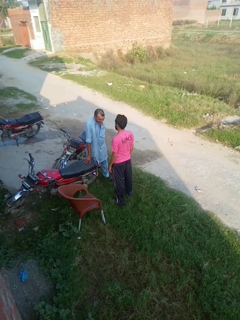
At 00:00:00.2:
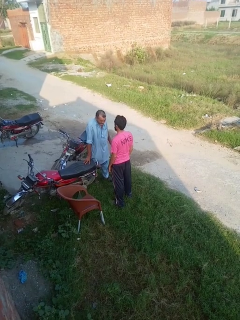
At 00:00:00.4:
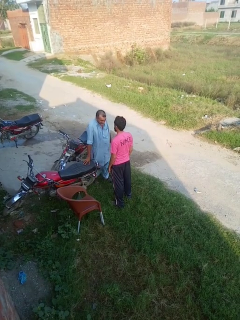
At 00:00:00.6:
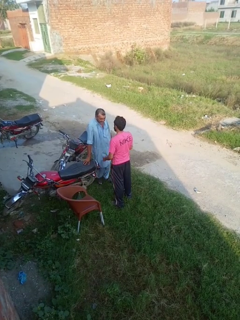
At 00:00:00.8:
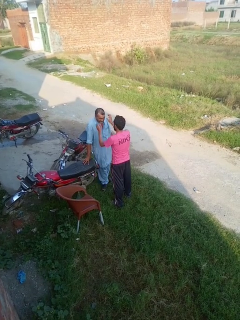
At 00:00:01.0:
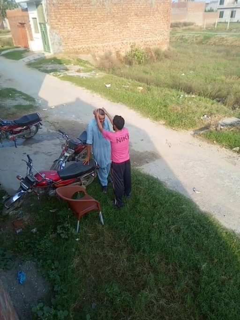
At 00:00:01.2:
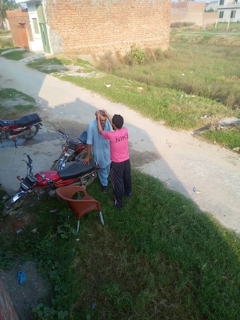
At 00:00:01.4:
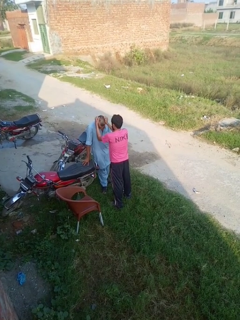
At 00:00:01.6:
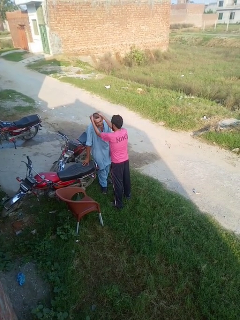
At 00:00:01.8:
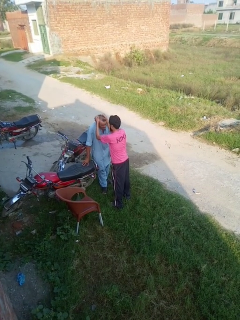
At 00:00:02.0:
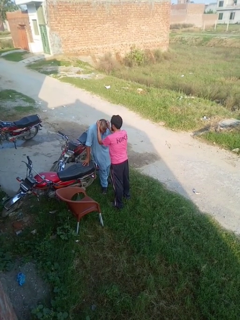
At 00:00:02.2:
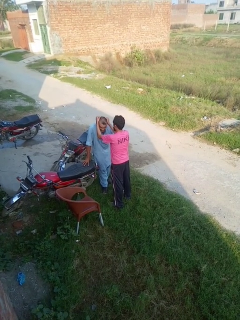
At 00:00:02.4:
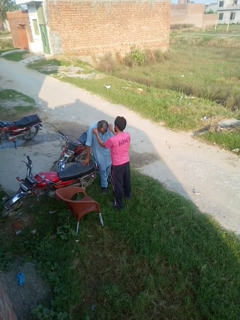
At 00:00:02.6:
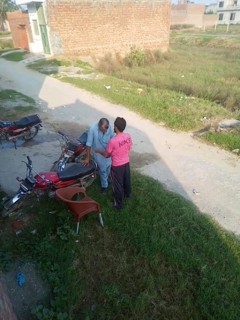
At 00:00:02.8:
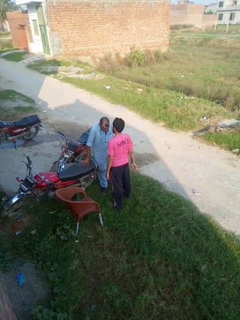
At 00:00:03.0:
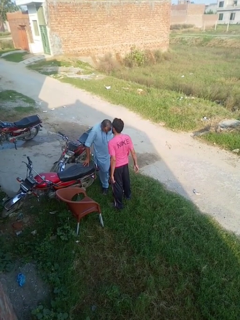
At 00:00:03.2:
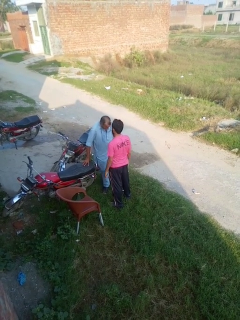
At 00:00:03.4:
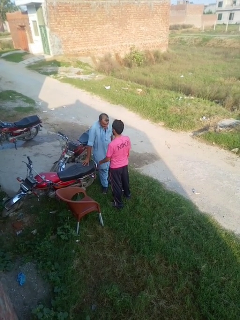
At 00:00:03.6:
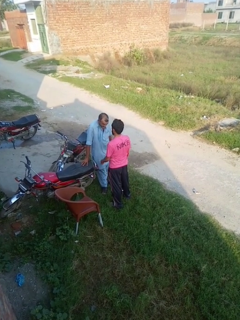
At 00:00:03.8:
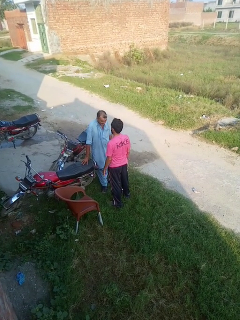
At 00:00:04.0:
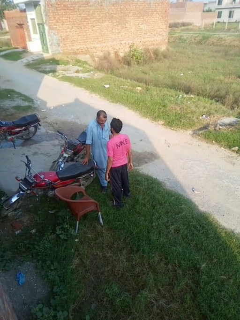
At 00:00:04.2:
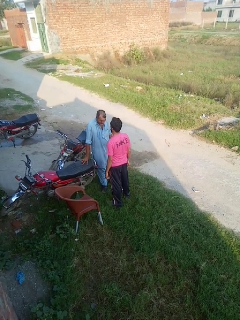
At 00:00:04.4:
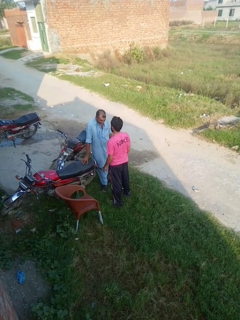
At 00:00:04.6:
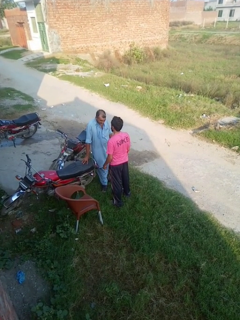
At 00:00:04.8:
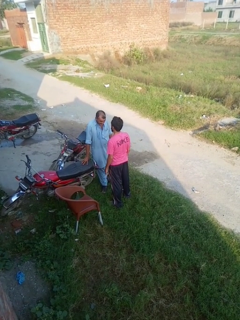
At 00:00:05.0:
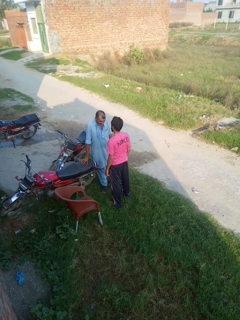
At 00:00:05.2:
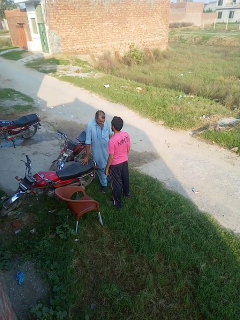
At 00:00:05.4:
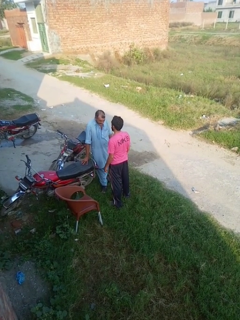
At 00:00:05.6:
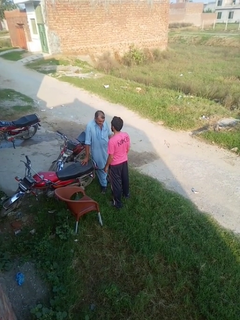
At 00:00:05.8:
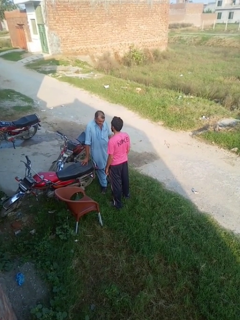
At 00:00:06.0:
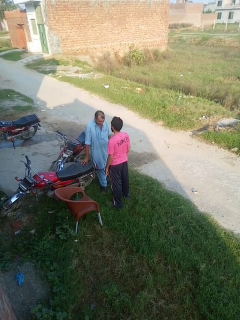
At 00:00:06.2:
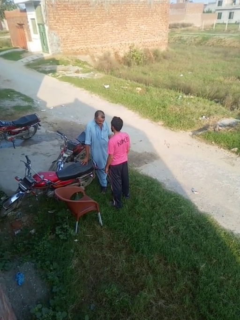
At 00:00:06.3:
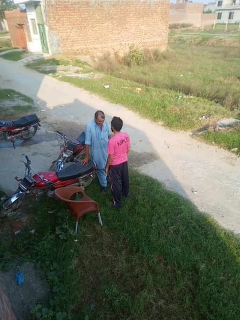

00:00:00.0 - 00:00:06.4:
person grabs person by hair

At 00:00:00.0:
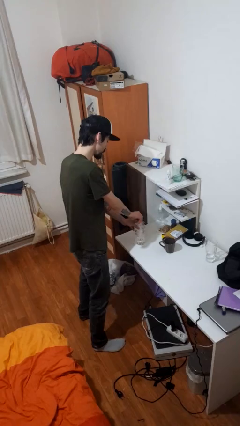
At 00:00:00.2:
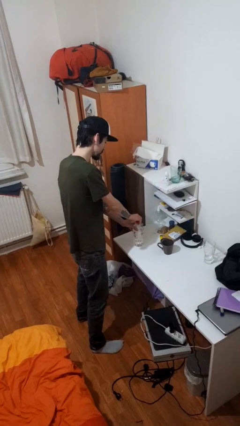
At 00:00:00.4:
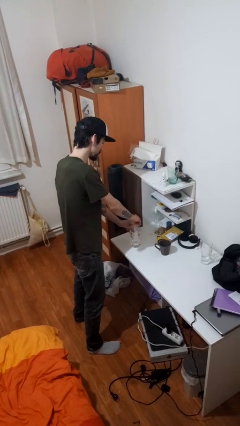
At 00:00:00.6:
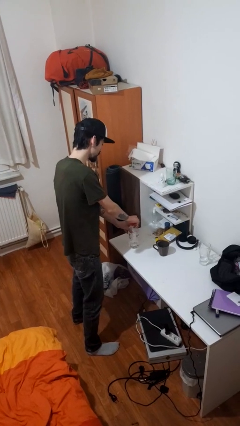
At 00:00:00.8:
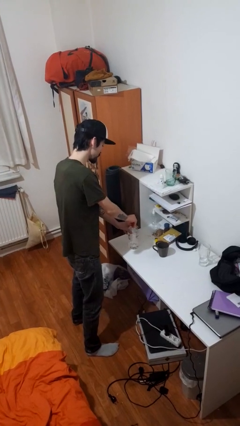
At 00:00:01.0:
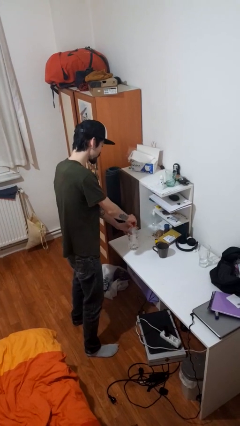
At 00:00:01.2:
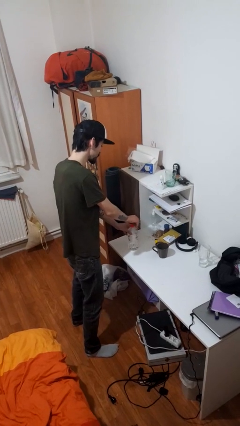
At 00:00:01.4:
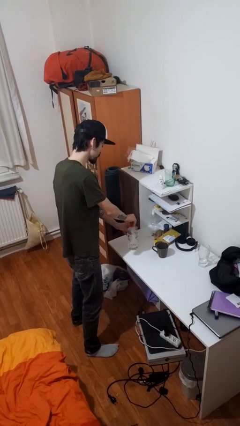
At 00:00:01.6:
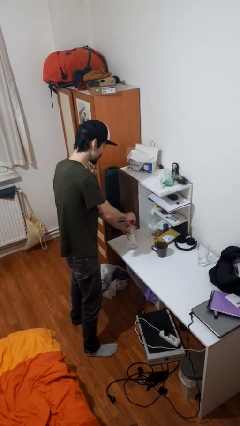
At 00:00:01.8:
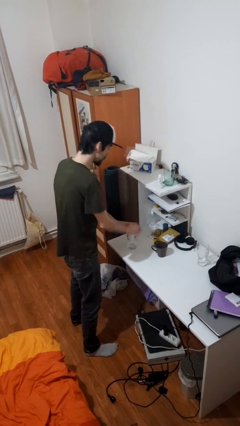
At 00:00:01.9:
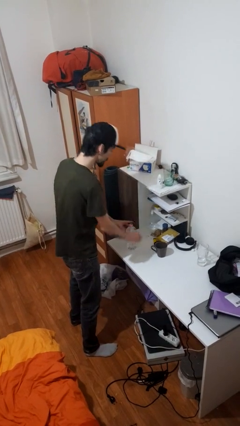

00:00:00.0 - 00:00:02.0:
person unscrews lid from bottle

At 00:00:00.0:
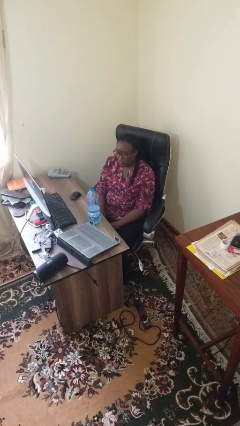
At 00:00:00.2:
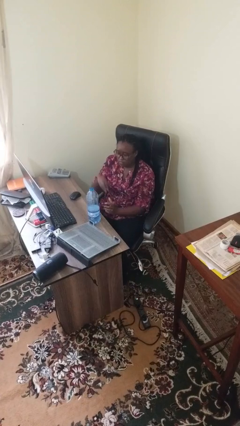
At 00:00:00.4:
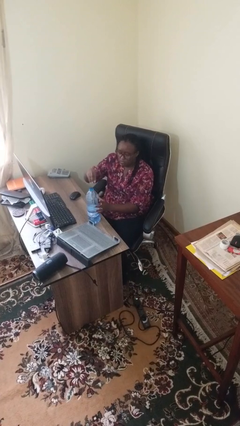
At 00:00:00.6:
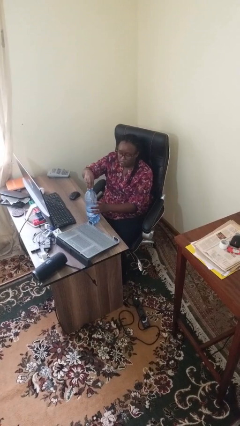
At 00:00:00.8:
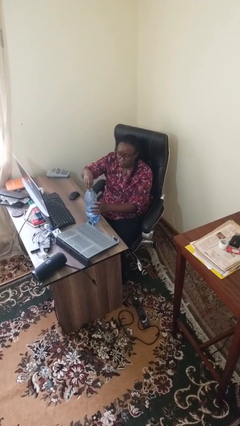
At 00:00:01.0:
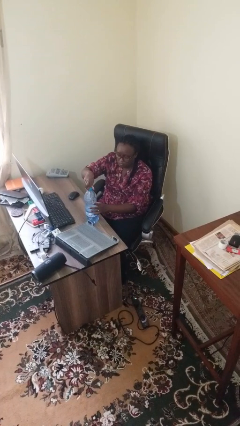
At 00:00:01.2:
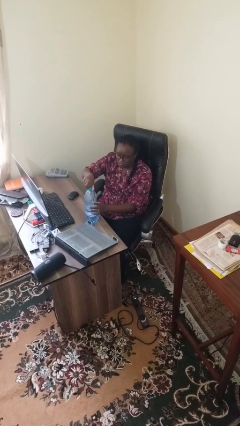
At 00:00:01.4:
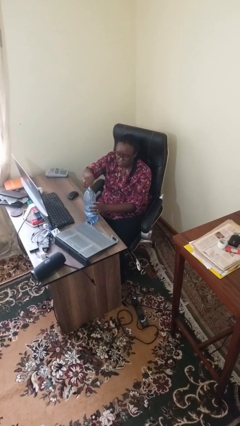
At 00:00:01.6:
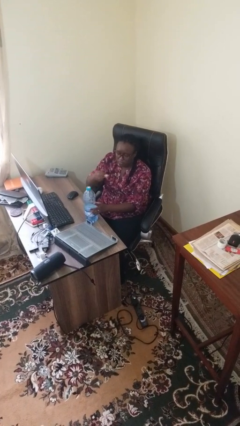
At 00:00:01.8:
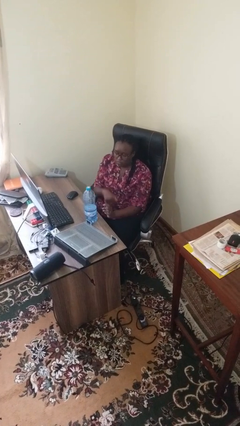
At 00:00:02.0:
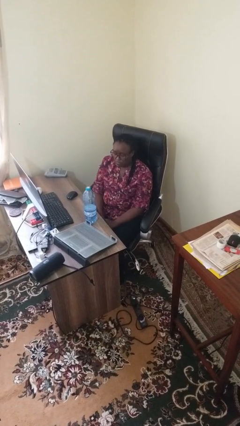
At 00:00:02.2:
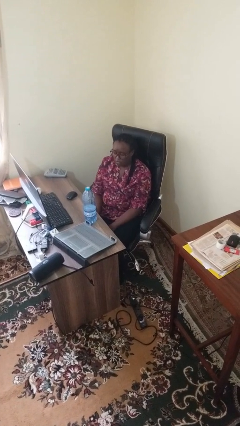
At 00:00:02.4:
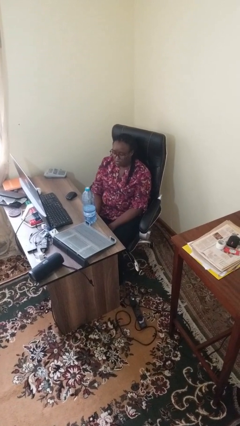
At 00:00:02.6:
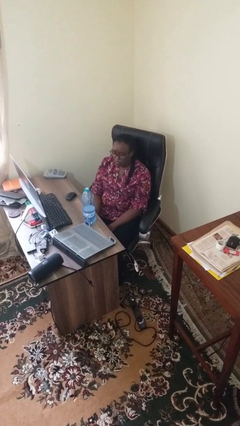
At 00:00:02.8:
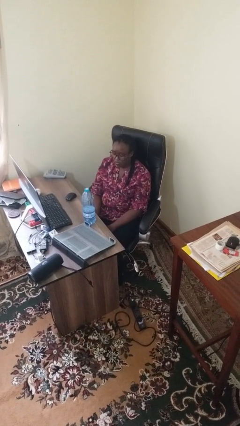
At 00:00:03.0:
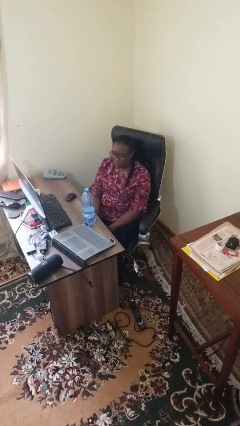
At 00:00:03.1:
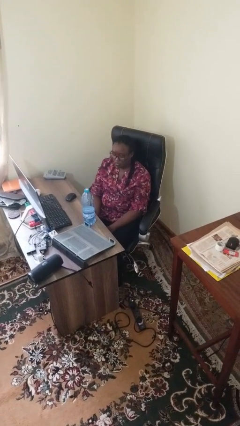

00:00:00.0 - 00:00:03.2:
person screws lid to bottle

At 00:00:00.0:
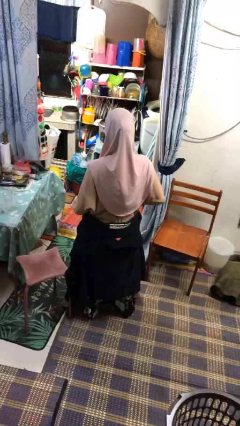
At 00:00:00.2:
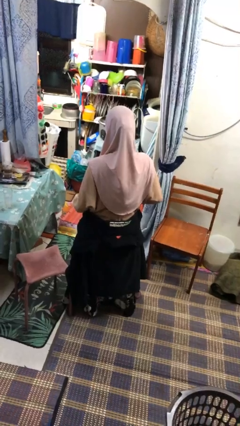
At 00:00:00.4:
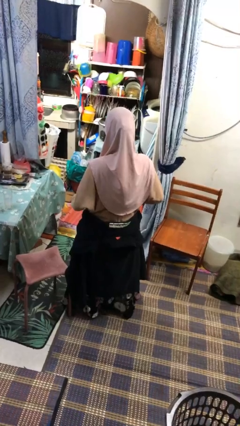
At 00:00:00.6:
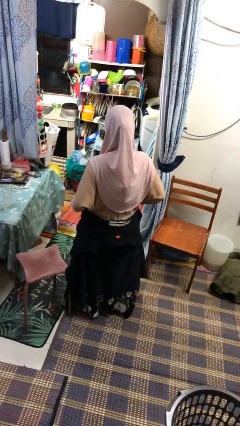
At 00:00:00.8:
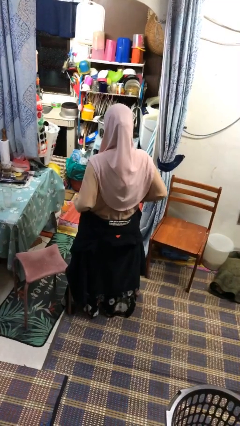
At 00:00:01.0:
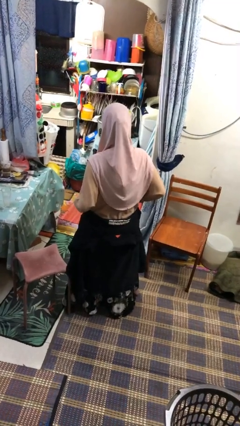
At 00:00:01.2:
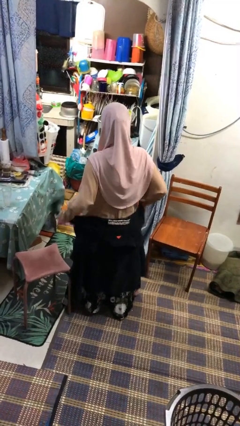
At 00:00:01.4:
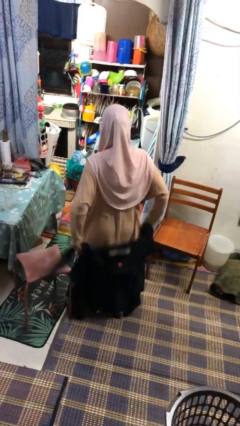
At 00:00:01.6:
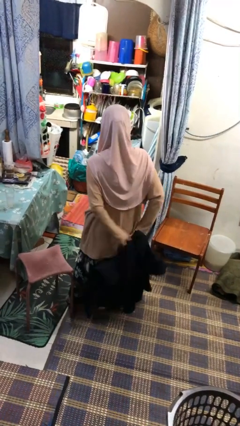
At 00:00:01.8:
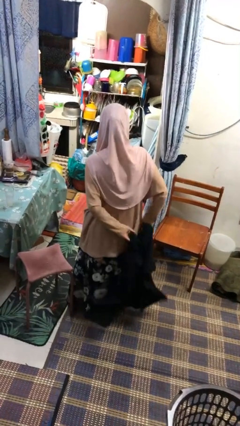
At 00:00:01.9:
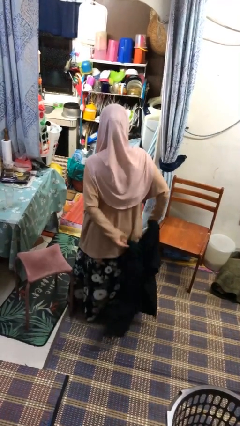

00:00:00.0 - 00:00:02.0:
person unties jacket around waist

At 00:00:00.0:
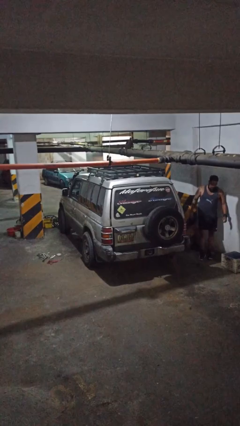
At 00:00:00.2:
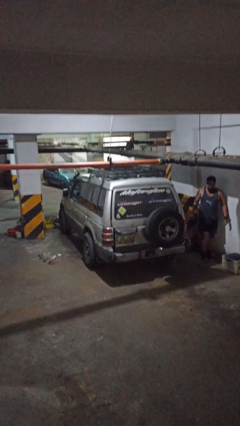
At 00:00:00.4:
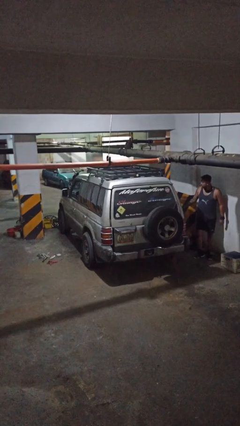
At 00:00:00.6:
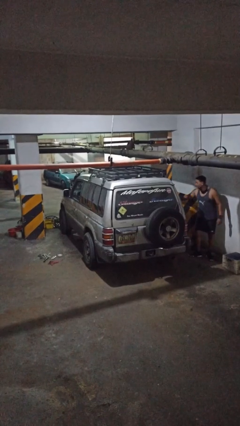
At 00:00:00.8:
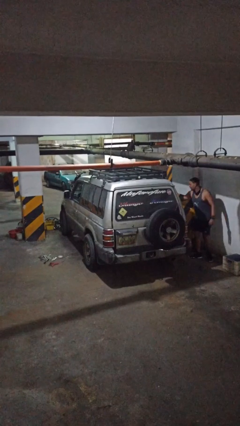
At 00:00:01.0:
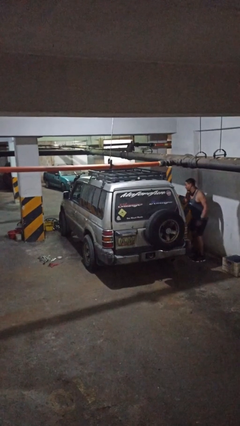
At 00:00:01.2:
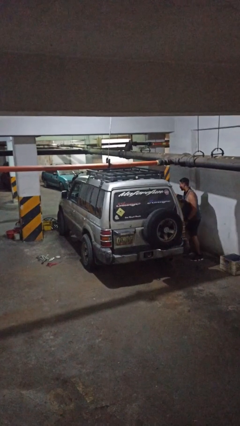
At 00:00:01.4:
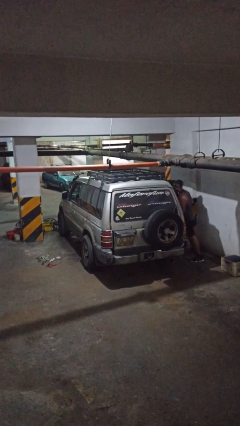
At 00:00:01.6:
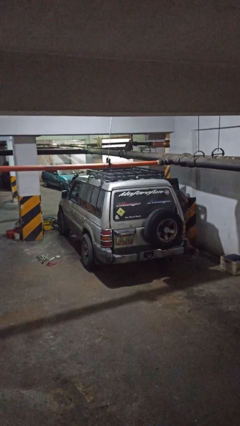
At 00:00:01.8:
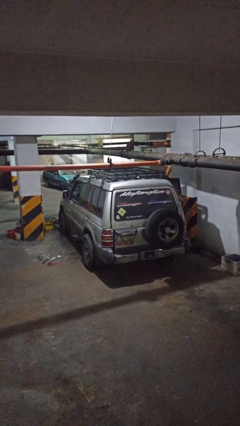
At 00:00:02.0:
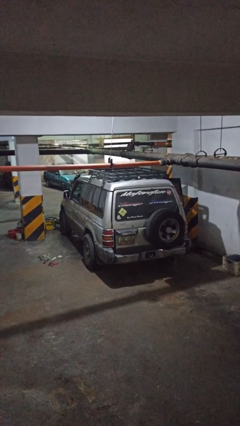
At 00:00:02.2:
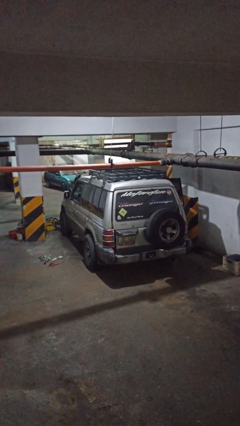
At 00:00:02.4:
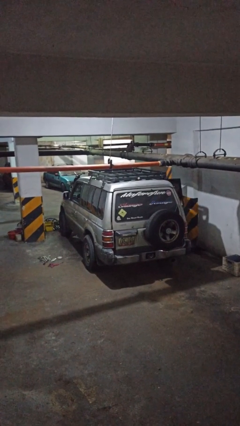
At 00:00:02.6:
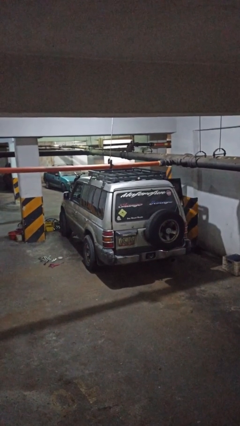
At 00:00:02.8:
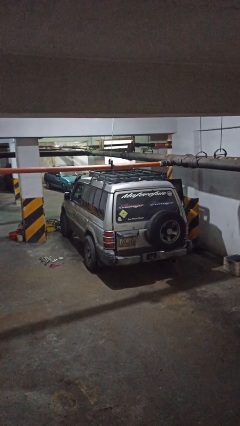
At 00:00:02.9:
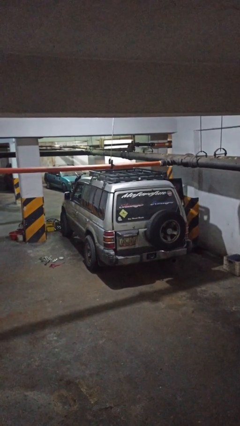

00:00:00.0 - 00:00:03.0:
car picks up person

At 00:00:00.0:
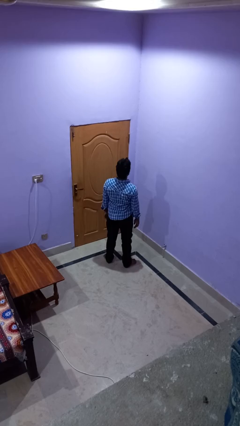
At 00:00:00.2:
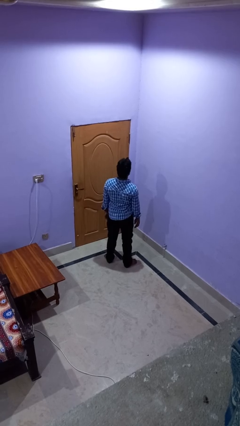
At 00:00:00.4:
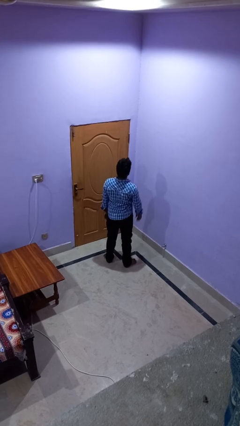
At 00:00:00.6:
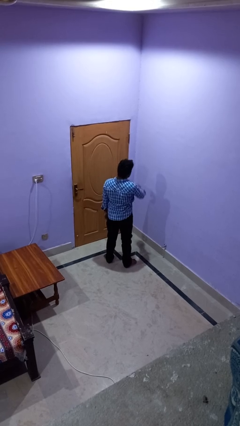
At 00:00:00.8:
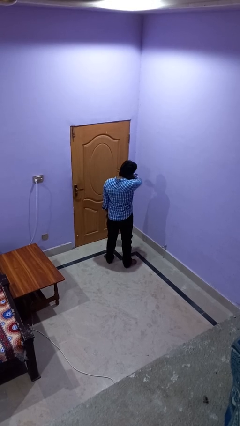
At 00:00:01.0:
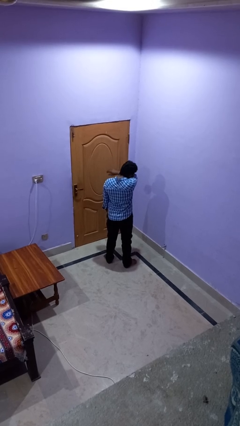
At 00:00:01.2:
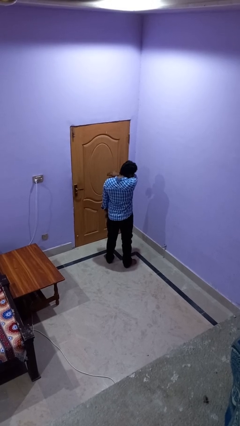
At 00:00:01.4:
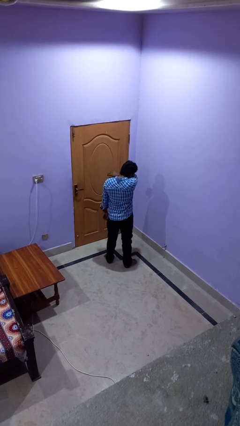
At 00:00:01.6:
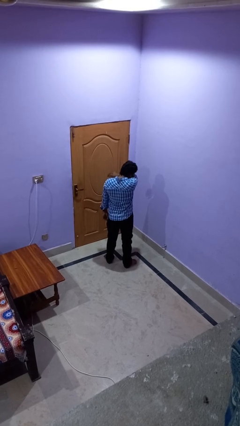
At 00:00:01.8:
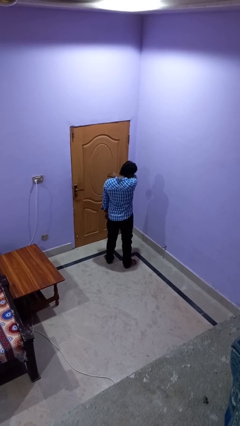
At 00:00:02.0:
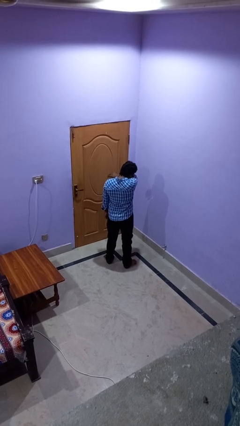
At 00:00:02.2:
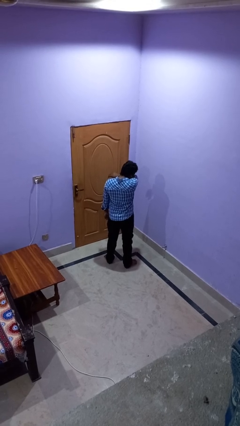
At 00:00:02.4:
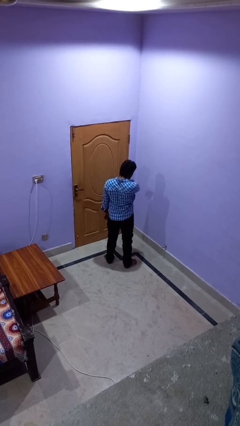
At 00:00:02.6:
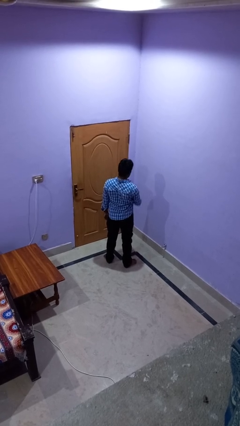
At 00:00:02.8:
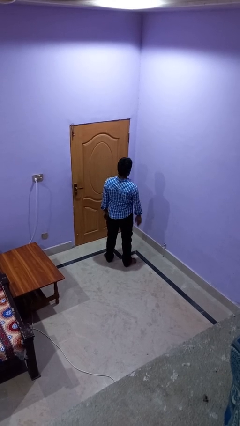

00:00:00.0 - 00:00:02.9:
person sneezes into arm
